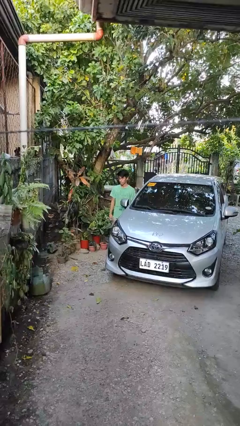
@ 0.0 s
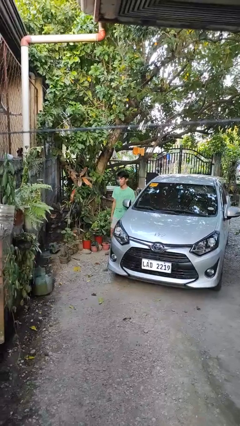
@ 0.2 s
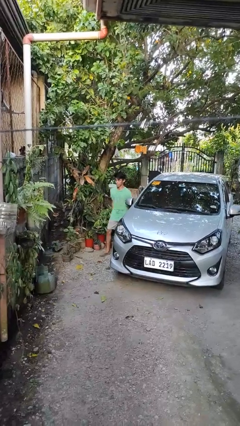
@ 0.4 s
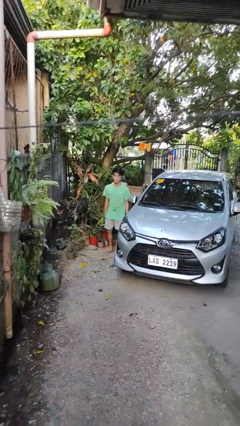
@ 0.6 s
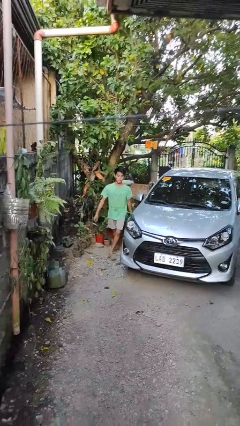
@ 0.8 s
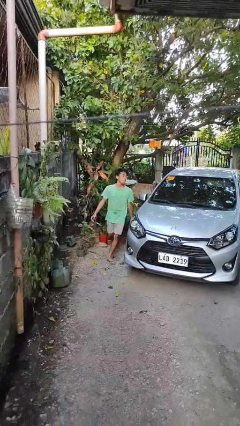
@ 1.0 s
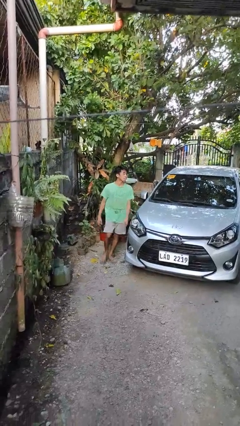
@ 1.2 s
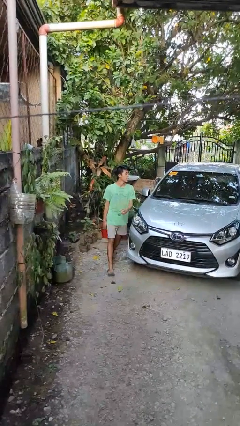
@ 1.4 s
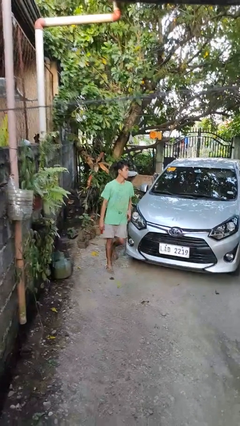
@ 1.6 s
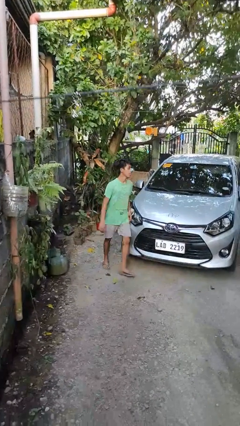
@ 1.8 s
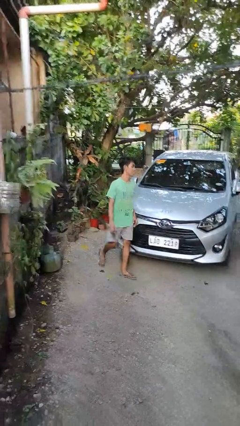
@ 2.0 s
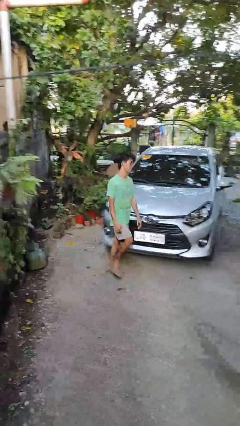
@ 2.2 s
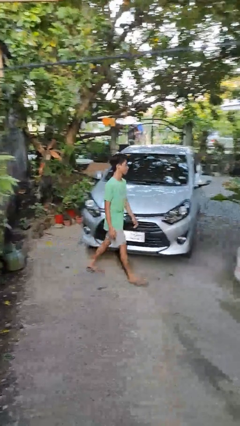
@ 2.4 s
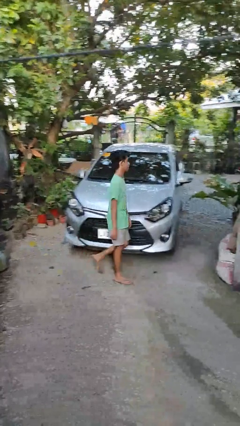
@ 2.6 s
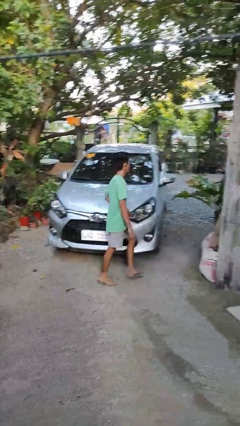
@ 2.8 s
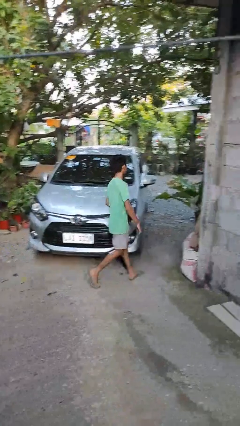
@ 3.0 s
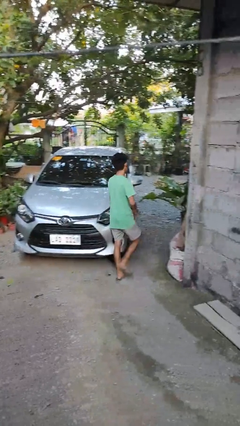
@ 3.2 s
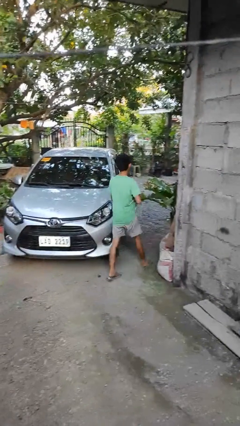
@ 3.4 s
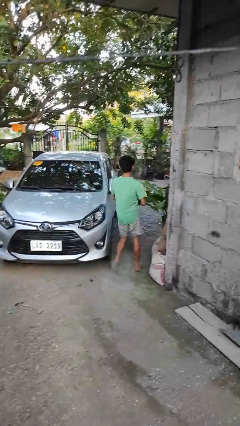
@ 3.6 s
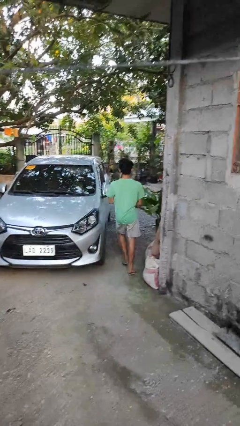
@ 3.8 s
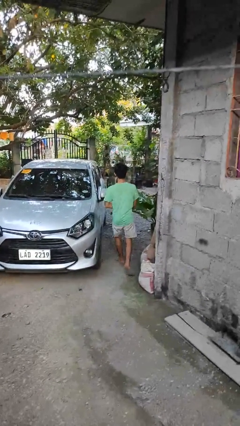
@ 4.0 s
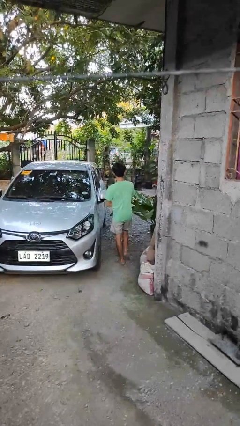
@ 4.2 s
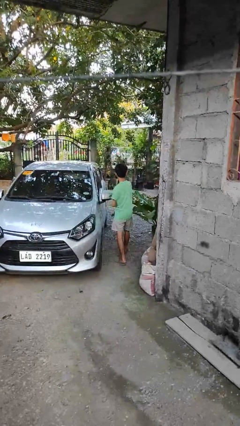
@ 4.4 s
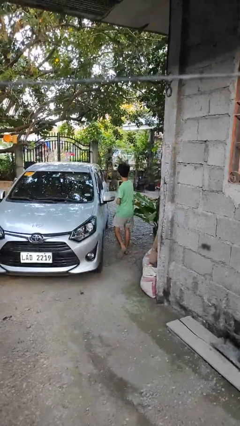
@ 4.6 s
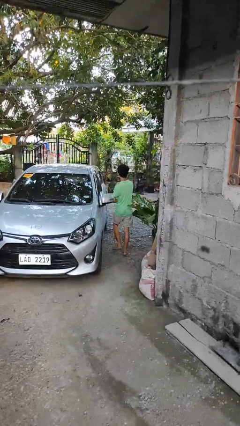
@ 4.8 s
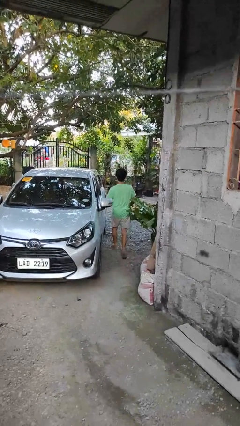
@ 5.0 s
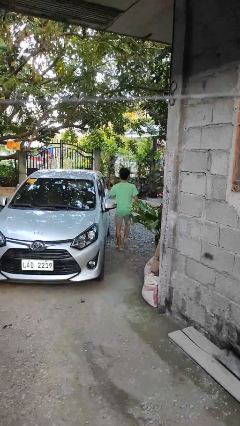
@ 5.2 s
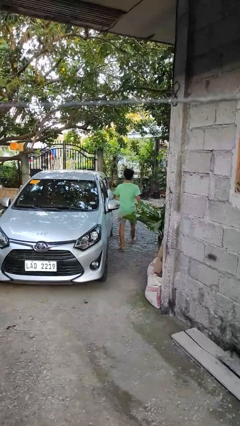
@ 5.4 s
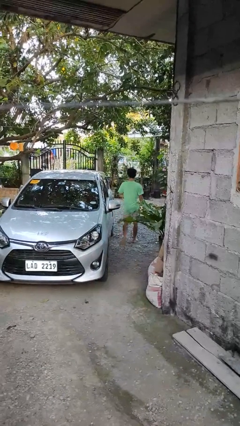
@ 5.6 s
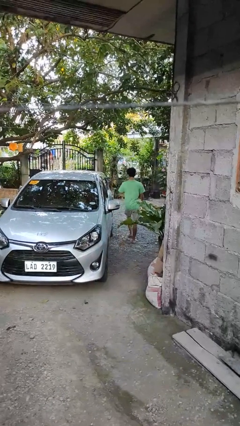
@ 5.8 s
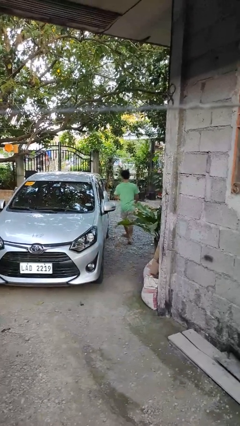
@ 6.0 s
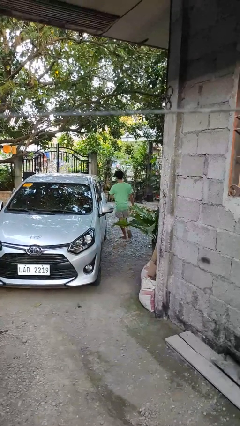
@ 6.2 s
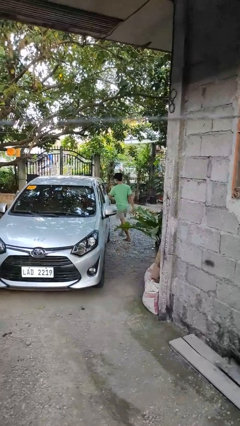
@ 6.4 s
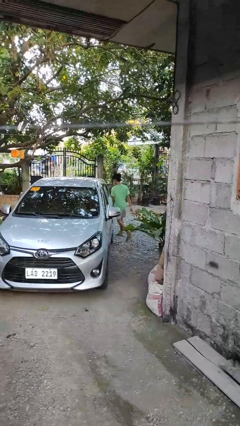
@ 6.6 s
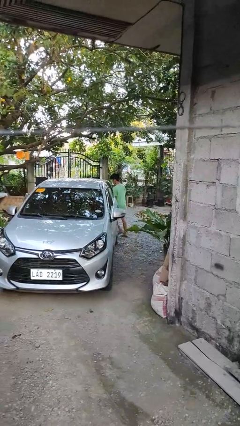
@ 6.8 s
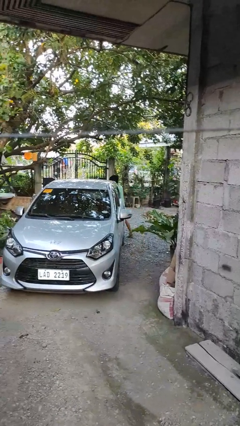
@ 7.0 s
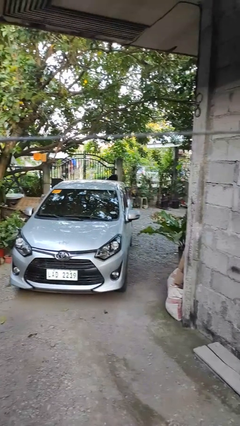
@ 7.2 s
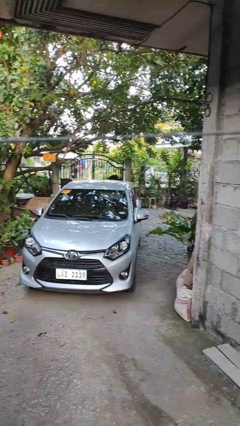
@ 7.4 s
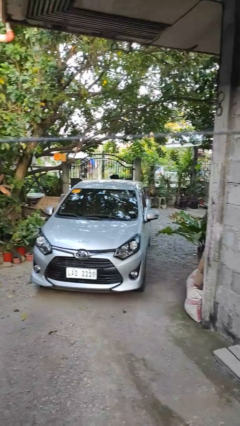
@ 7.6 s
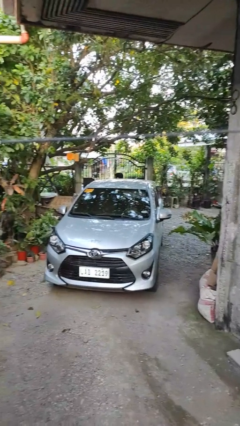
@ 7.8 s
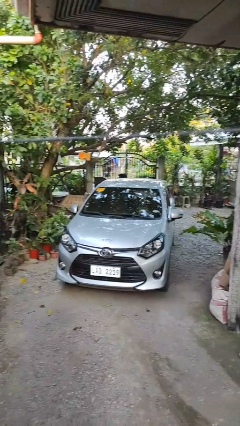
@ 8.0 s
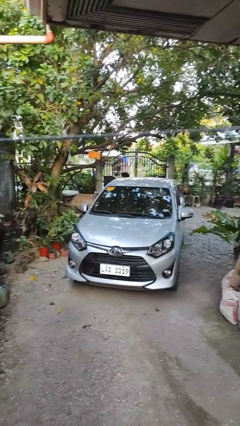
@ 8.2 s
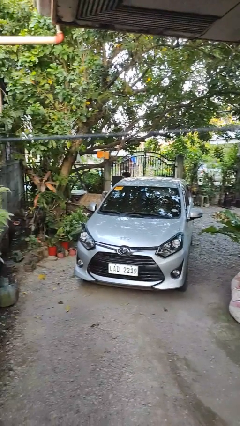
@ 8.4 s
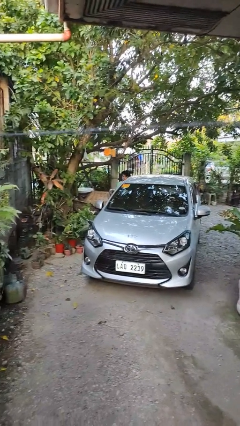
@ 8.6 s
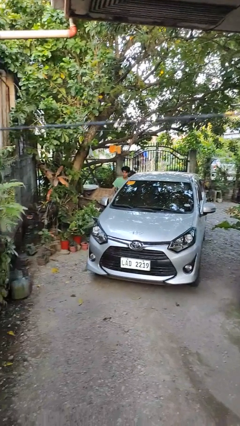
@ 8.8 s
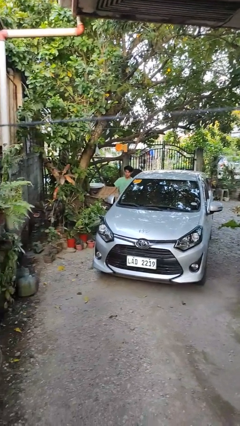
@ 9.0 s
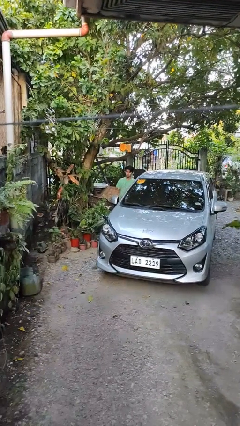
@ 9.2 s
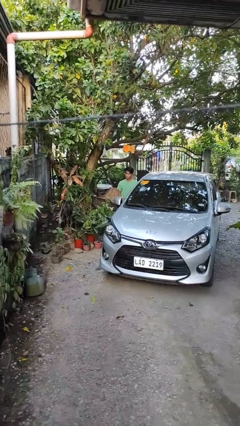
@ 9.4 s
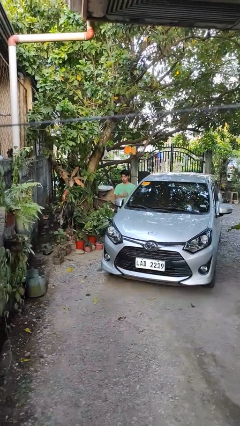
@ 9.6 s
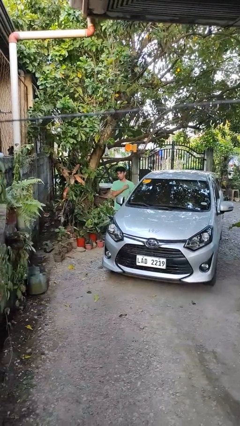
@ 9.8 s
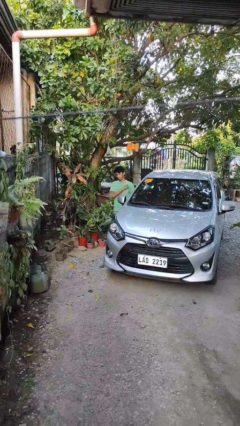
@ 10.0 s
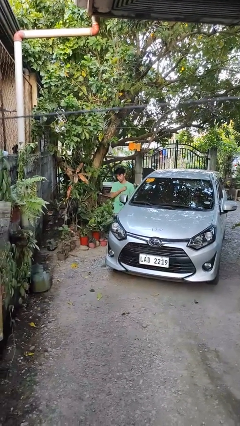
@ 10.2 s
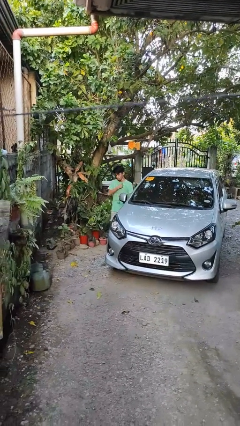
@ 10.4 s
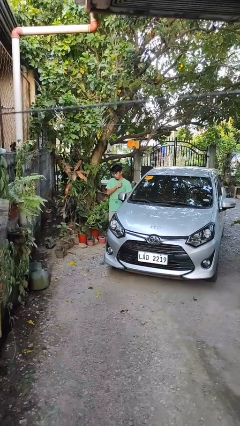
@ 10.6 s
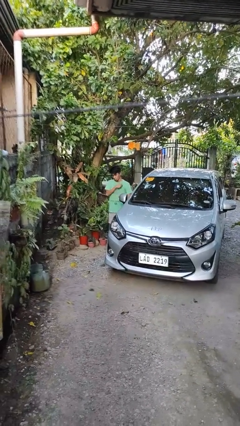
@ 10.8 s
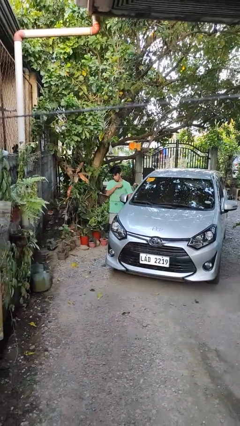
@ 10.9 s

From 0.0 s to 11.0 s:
person walks around car

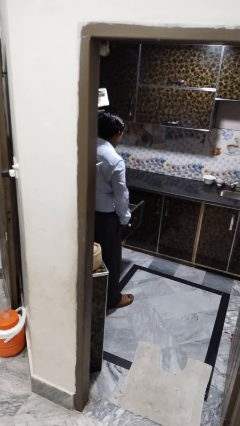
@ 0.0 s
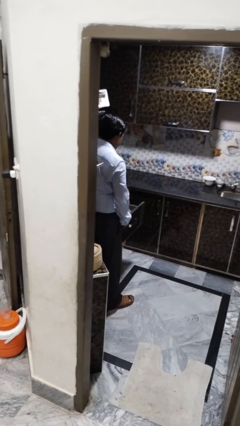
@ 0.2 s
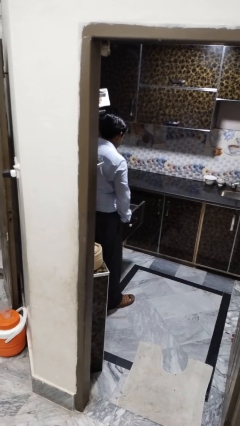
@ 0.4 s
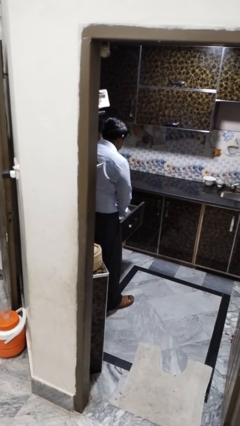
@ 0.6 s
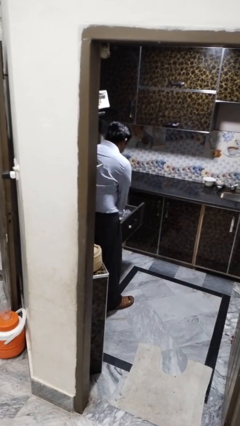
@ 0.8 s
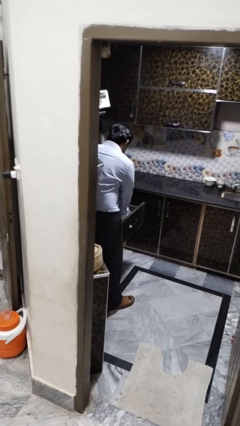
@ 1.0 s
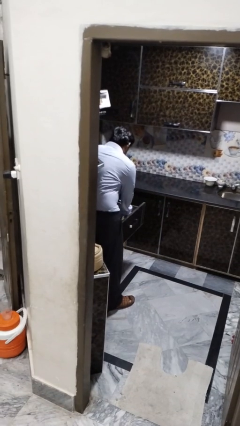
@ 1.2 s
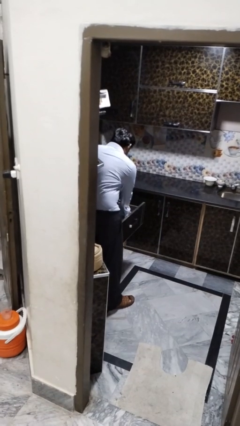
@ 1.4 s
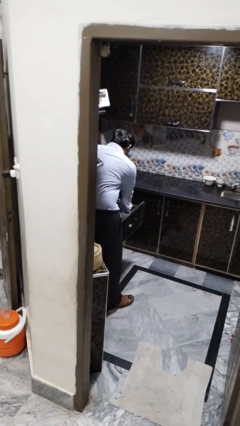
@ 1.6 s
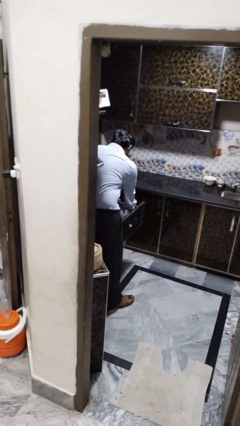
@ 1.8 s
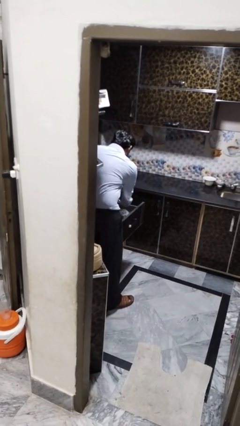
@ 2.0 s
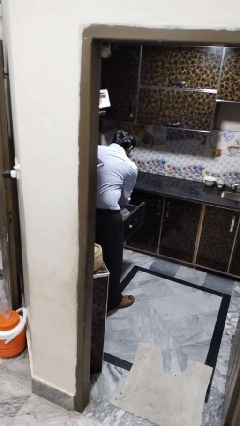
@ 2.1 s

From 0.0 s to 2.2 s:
person searches in kitchen drawer

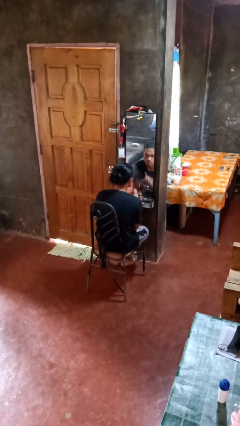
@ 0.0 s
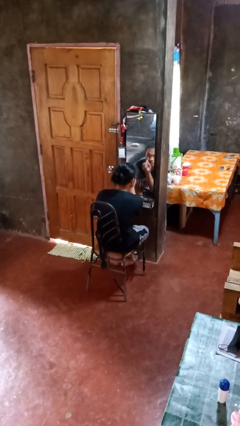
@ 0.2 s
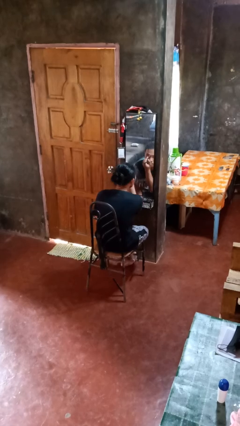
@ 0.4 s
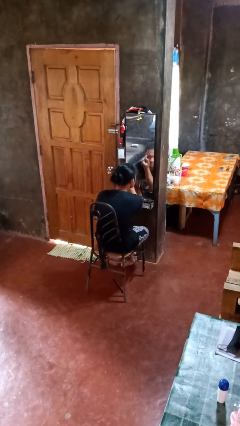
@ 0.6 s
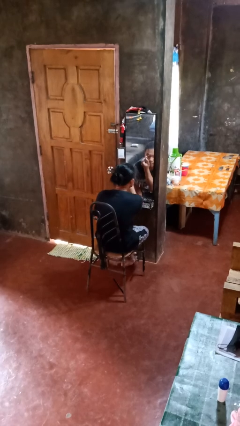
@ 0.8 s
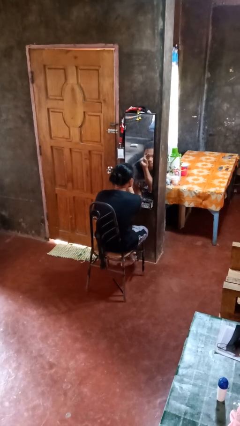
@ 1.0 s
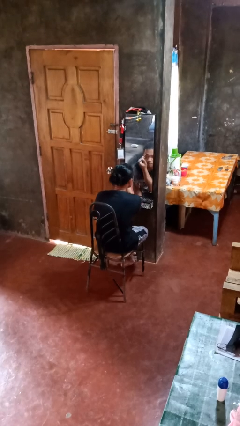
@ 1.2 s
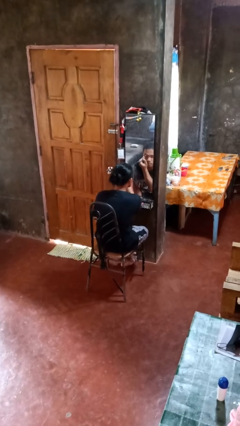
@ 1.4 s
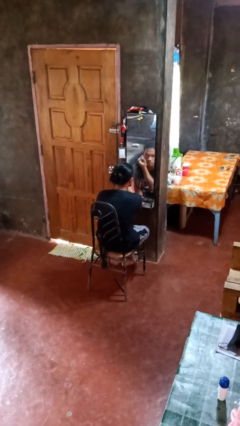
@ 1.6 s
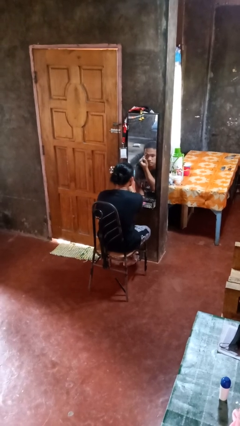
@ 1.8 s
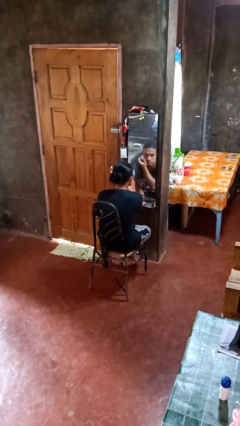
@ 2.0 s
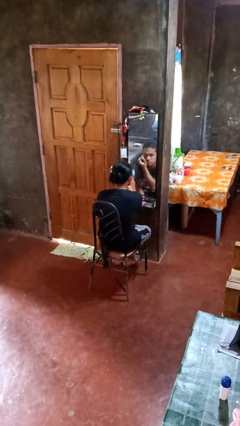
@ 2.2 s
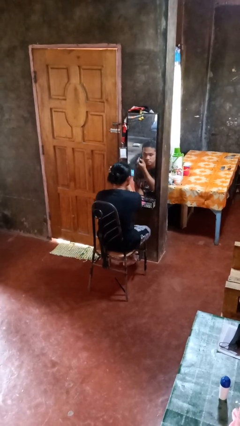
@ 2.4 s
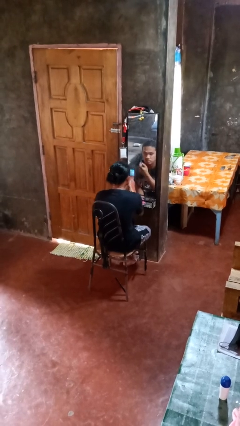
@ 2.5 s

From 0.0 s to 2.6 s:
person applies eye makeup

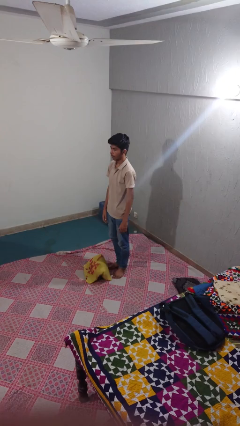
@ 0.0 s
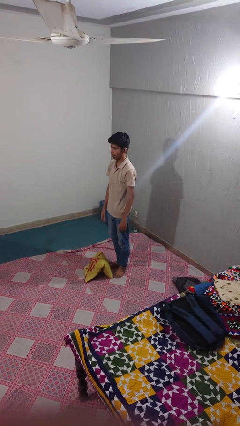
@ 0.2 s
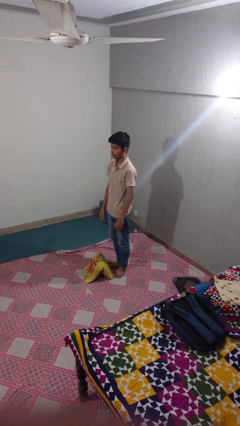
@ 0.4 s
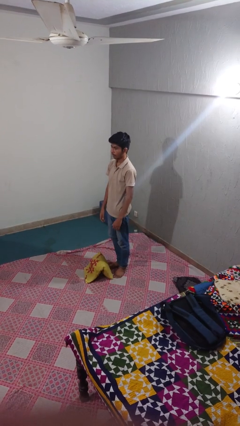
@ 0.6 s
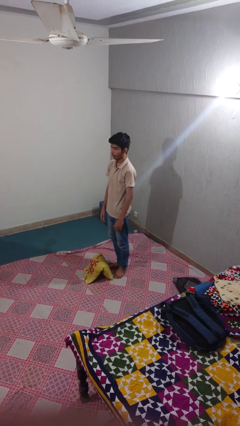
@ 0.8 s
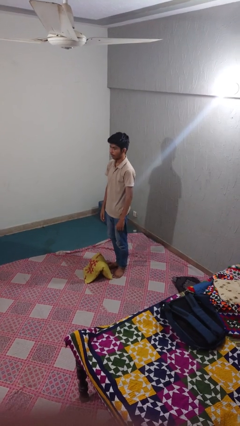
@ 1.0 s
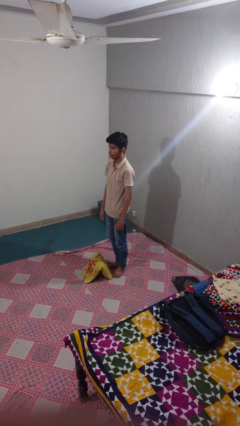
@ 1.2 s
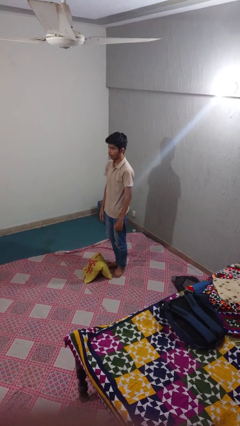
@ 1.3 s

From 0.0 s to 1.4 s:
person drops object

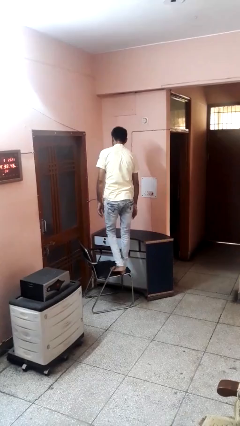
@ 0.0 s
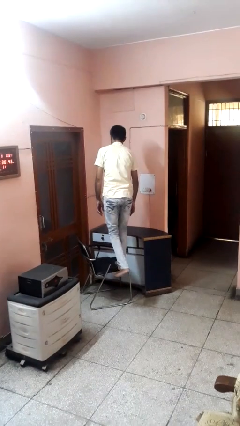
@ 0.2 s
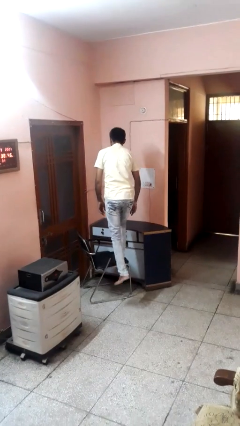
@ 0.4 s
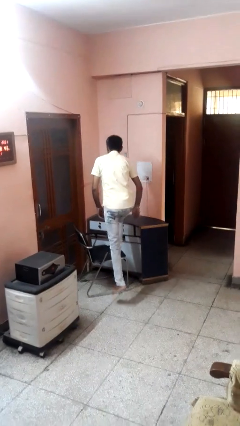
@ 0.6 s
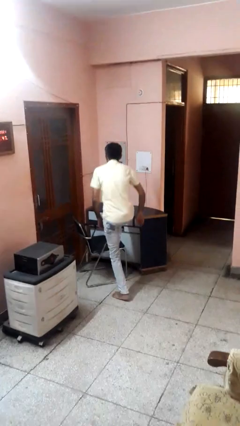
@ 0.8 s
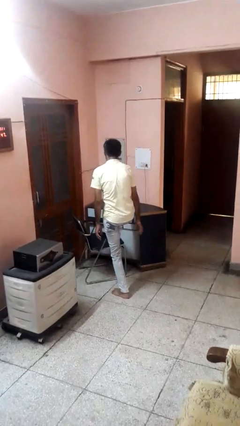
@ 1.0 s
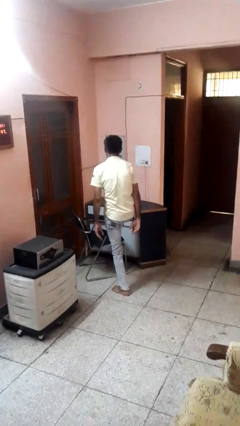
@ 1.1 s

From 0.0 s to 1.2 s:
person climbs off chair
